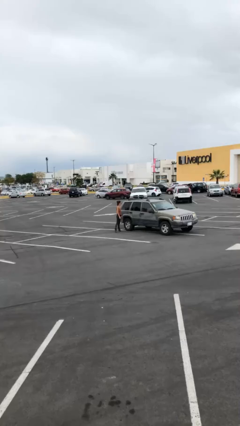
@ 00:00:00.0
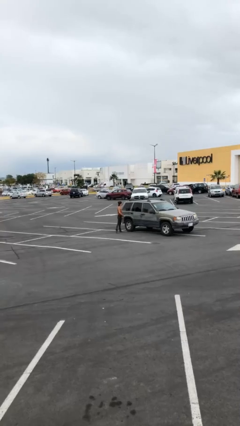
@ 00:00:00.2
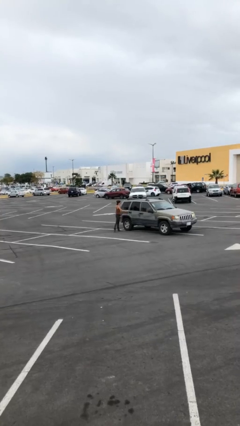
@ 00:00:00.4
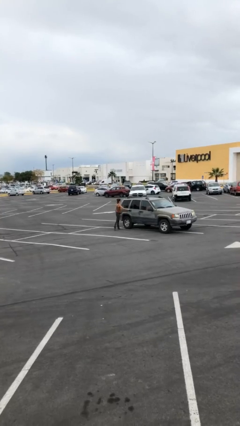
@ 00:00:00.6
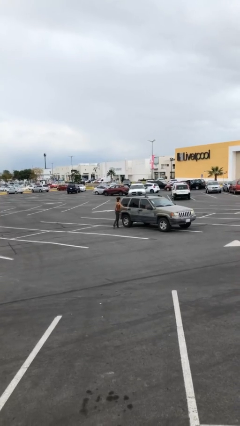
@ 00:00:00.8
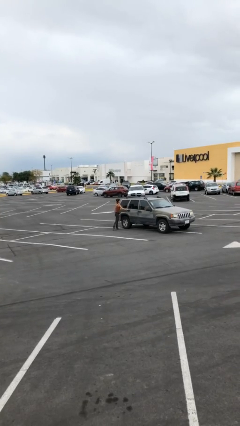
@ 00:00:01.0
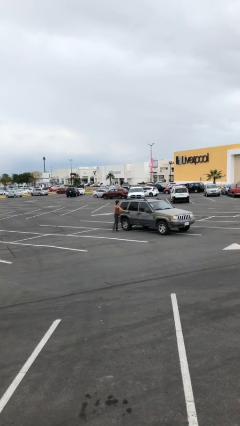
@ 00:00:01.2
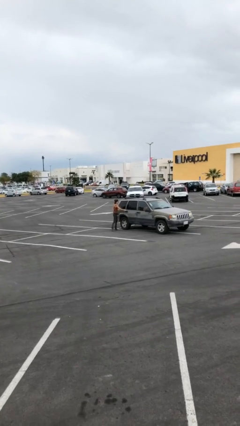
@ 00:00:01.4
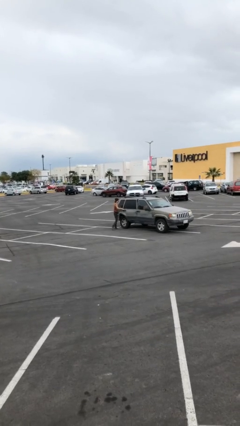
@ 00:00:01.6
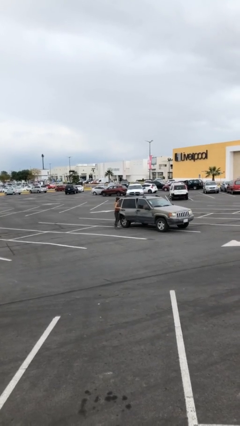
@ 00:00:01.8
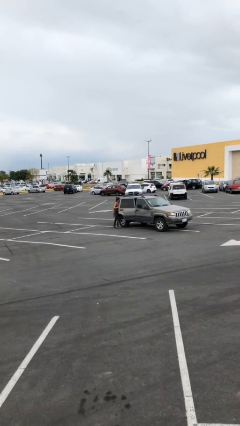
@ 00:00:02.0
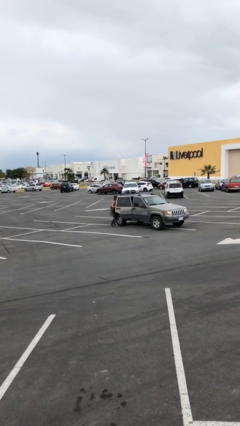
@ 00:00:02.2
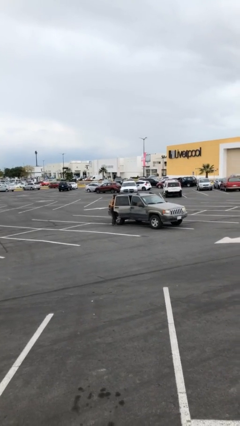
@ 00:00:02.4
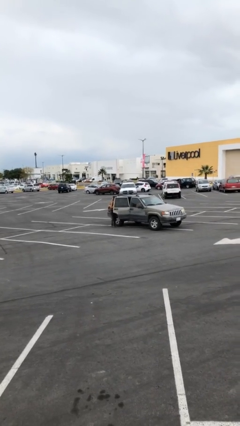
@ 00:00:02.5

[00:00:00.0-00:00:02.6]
person opens car door

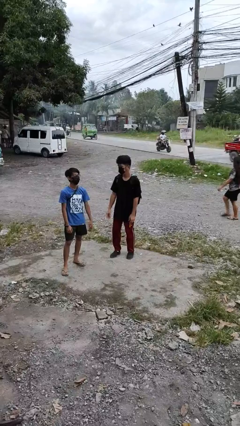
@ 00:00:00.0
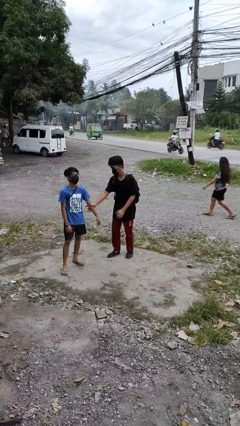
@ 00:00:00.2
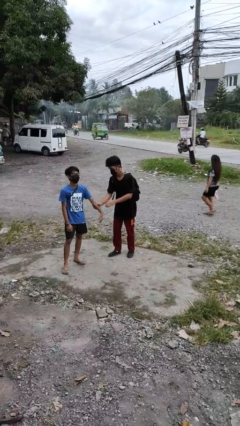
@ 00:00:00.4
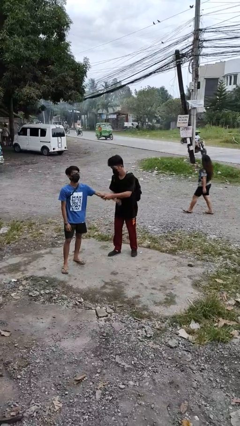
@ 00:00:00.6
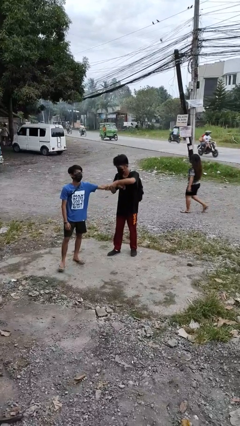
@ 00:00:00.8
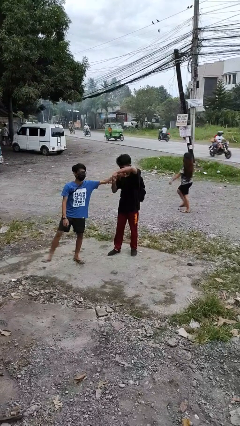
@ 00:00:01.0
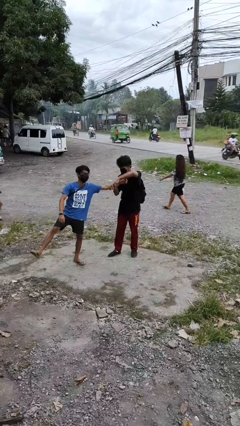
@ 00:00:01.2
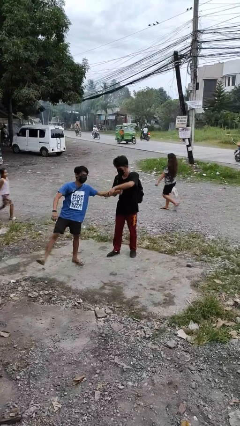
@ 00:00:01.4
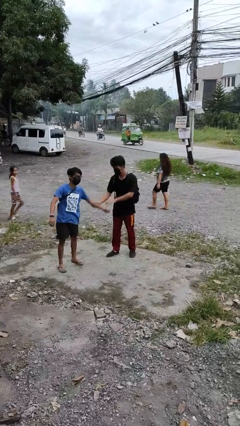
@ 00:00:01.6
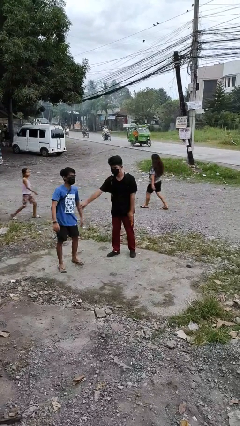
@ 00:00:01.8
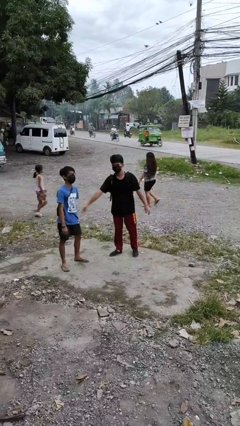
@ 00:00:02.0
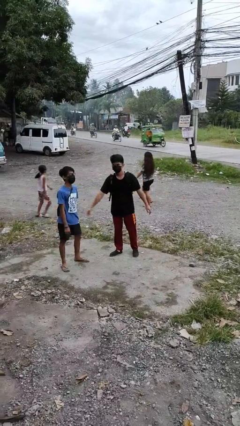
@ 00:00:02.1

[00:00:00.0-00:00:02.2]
person grabs person by forearm

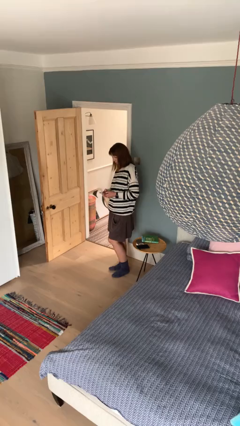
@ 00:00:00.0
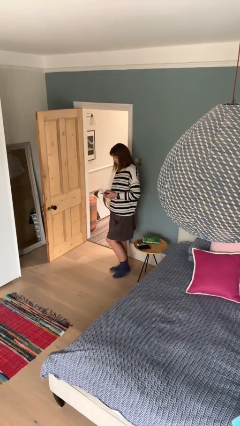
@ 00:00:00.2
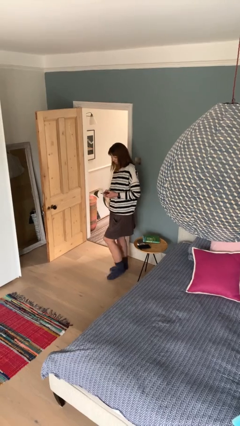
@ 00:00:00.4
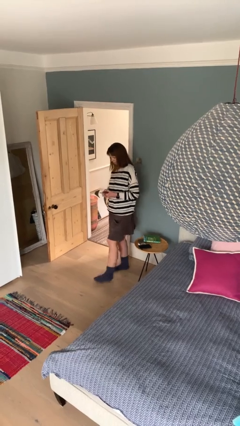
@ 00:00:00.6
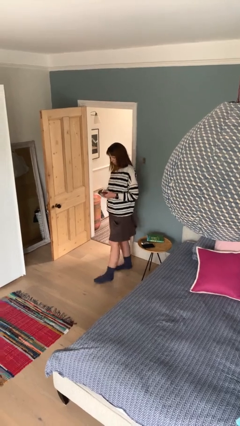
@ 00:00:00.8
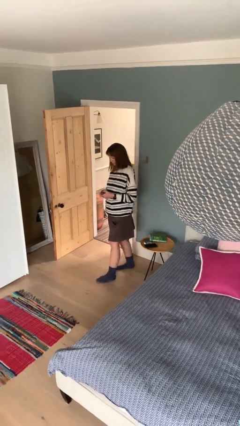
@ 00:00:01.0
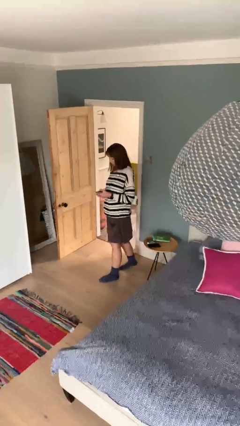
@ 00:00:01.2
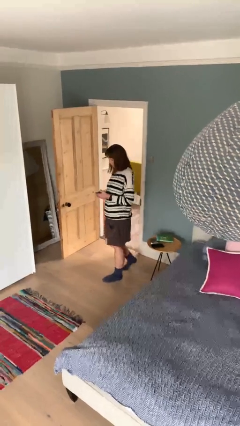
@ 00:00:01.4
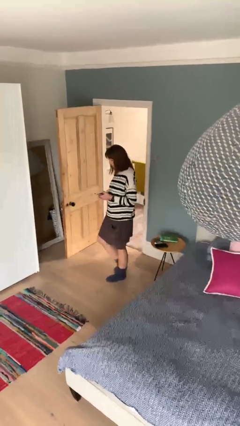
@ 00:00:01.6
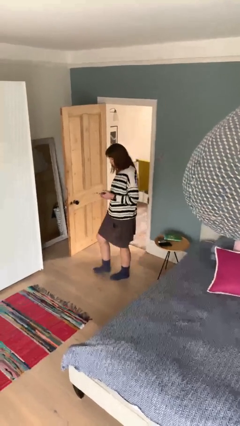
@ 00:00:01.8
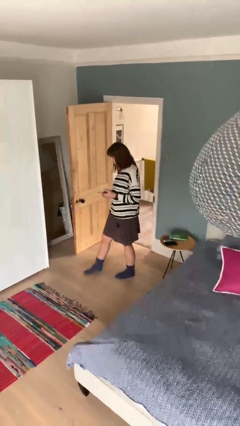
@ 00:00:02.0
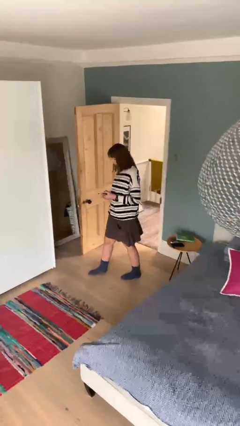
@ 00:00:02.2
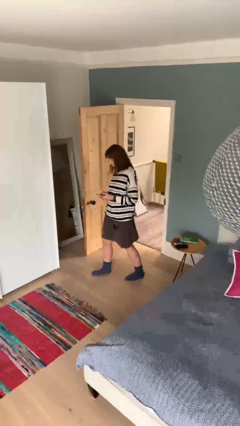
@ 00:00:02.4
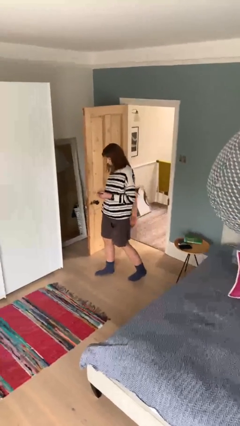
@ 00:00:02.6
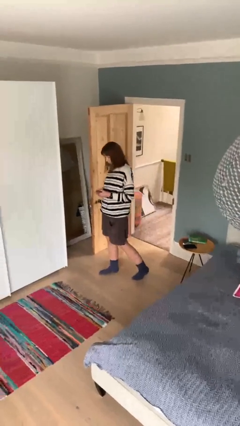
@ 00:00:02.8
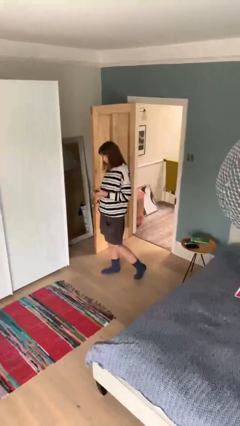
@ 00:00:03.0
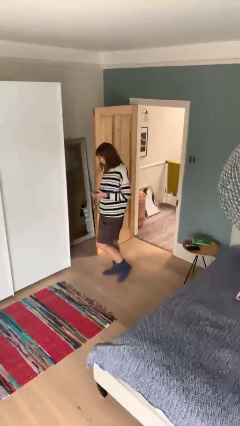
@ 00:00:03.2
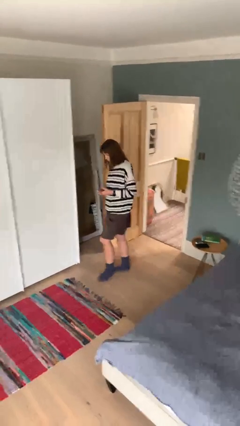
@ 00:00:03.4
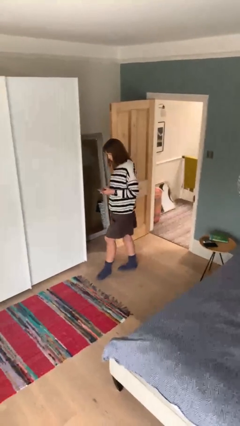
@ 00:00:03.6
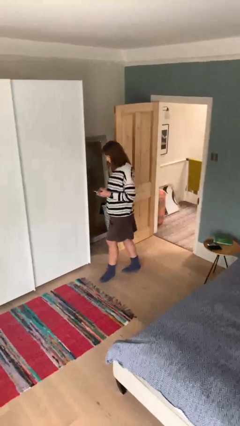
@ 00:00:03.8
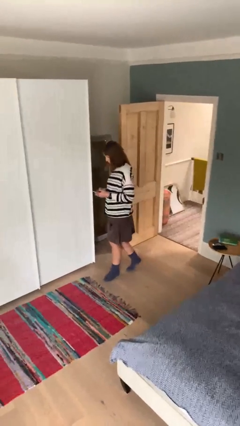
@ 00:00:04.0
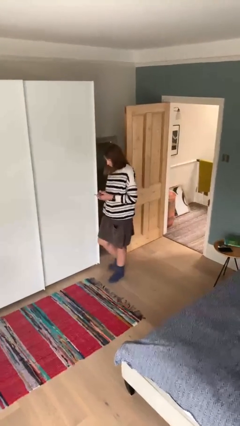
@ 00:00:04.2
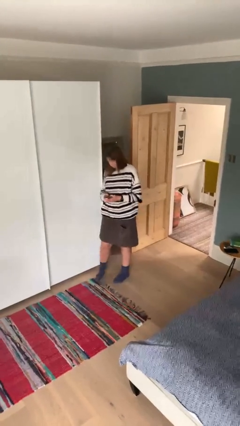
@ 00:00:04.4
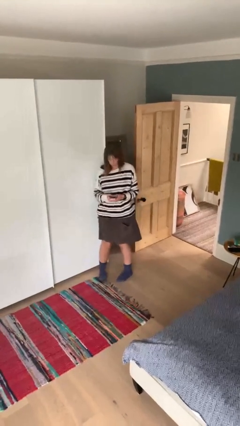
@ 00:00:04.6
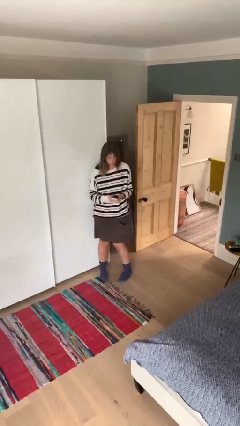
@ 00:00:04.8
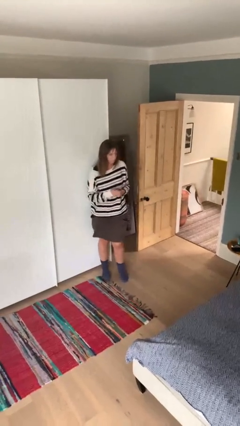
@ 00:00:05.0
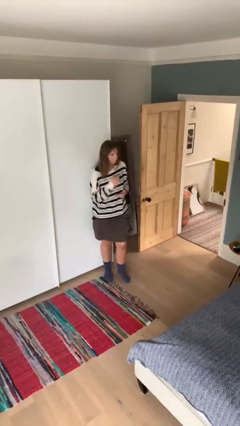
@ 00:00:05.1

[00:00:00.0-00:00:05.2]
person texts on phone

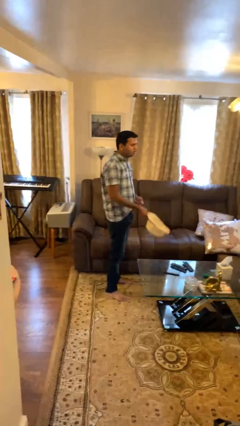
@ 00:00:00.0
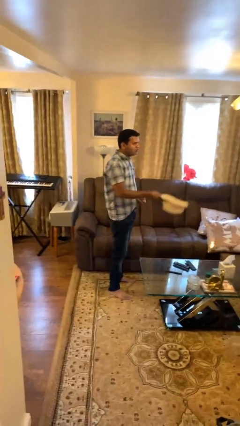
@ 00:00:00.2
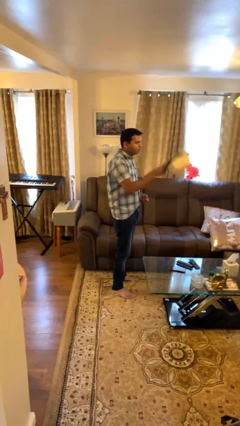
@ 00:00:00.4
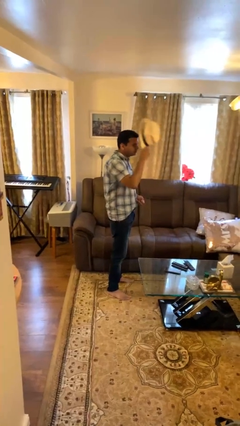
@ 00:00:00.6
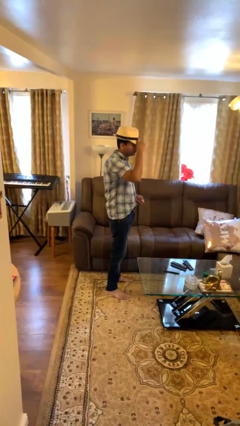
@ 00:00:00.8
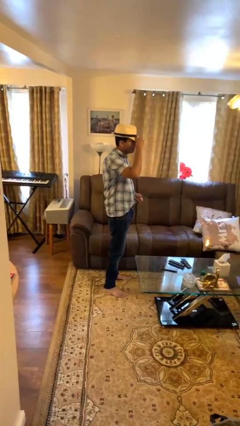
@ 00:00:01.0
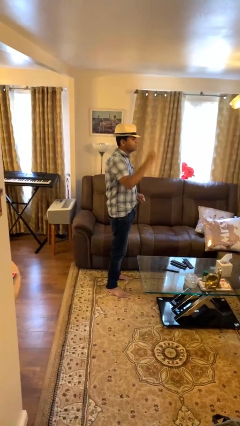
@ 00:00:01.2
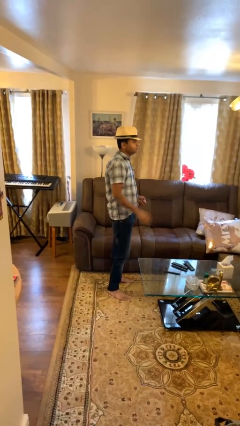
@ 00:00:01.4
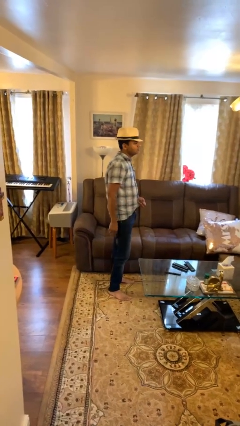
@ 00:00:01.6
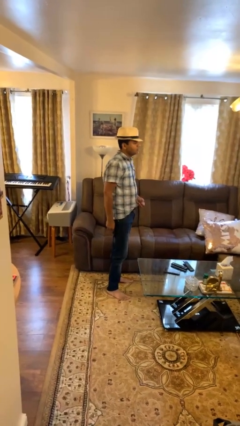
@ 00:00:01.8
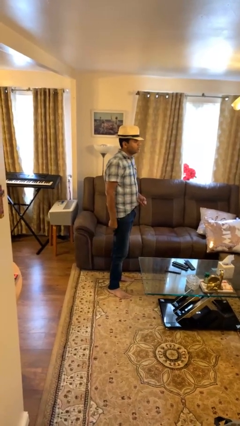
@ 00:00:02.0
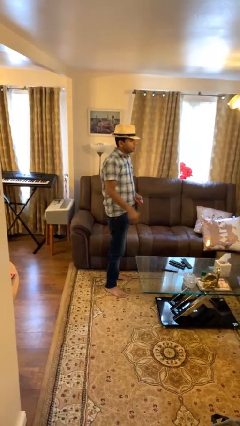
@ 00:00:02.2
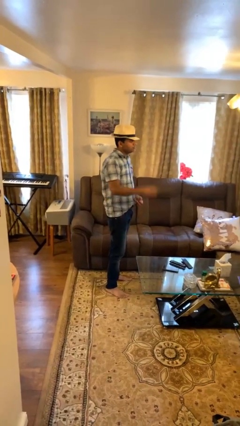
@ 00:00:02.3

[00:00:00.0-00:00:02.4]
person puts on hat

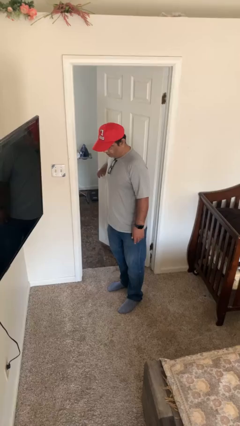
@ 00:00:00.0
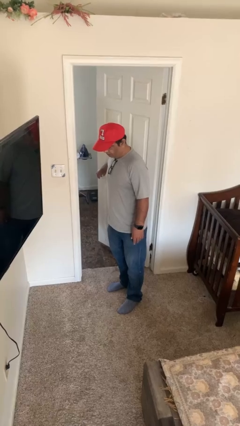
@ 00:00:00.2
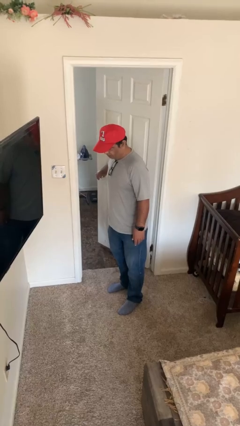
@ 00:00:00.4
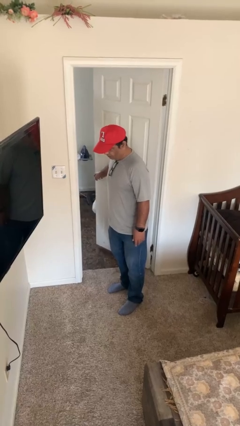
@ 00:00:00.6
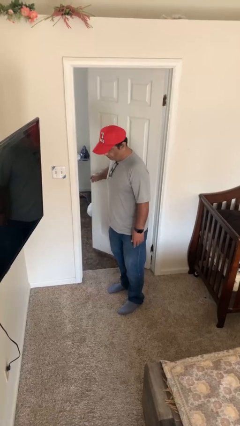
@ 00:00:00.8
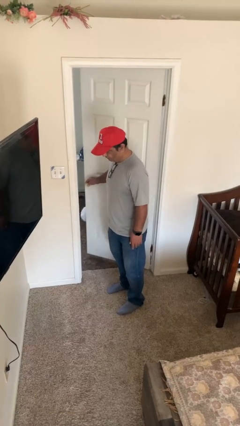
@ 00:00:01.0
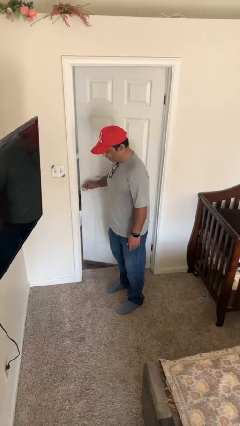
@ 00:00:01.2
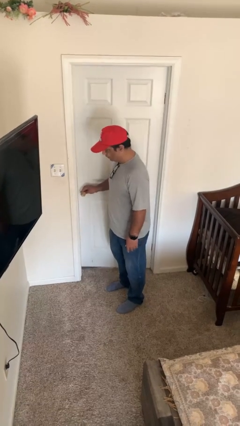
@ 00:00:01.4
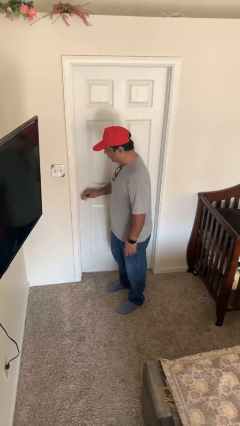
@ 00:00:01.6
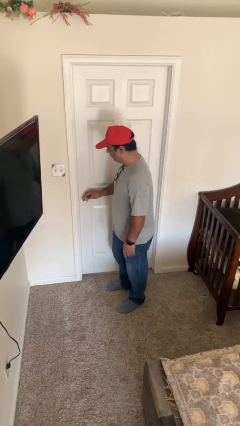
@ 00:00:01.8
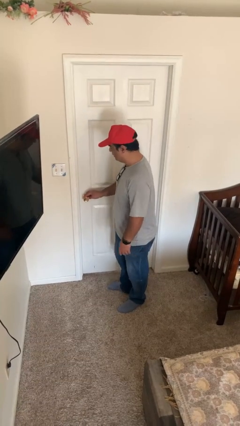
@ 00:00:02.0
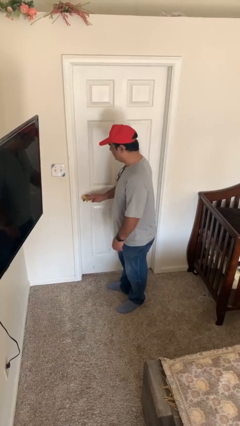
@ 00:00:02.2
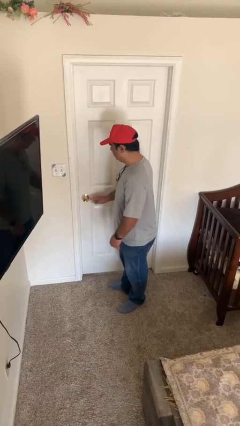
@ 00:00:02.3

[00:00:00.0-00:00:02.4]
person closes facility door

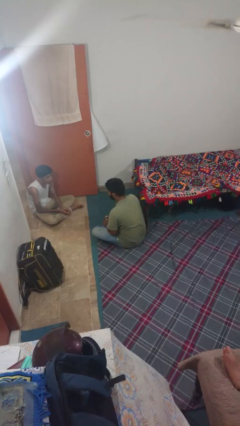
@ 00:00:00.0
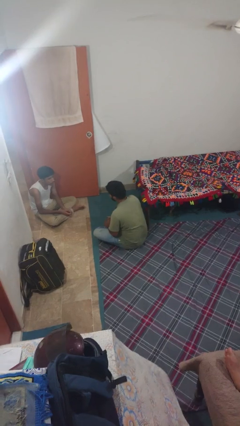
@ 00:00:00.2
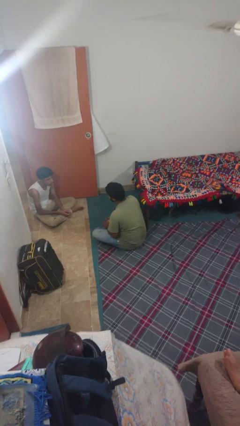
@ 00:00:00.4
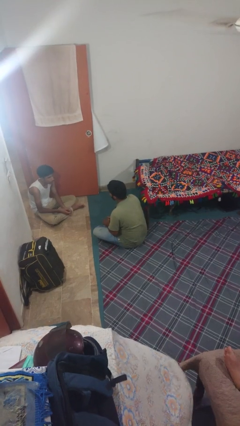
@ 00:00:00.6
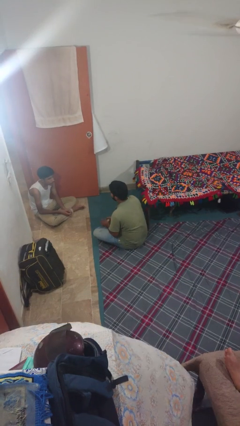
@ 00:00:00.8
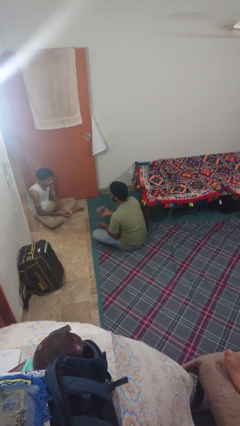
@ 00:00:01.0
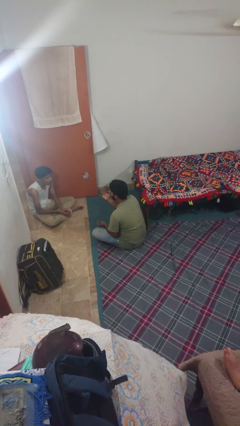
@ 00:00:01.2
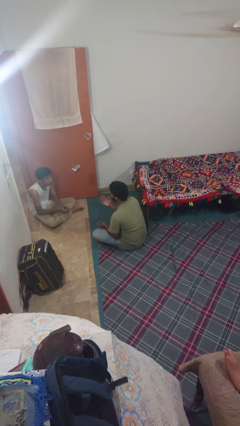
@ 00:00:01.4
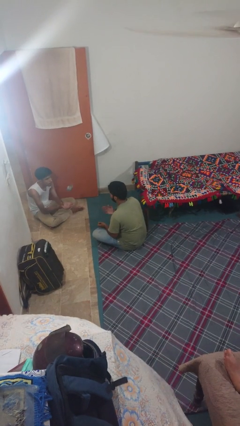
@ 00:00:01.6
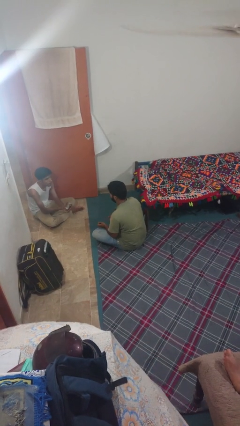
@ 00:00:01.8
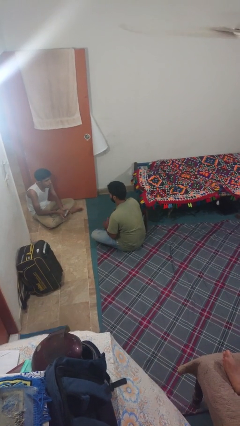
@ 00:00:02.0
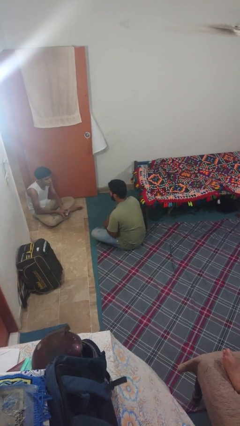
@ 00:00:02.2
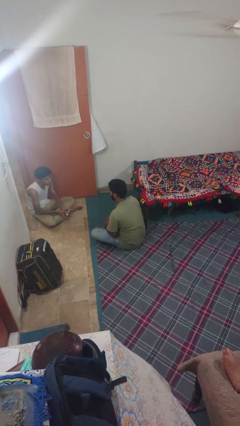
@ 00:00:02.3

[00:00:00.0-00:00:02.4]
person throws object to person
